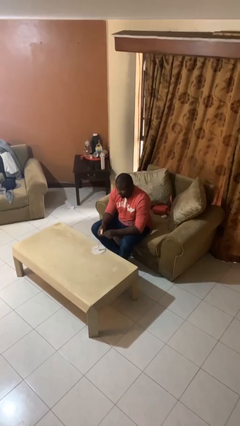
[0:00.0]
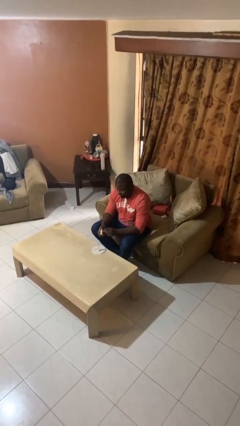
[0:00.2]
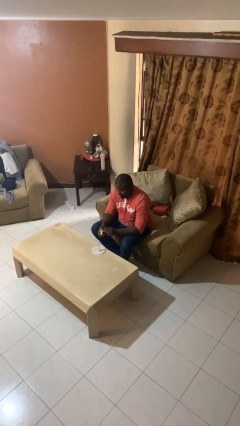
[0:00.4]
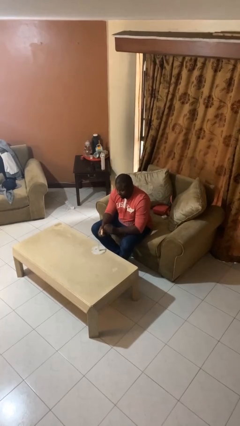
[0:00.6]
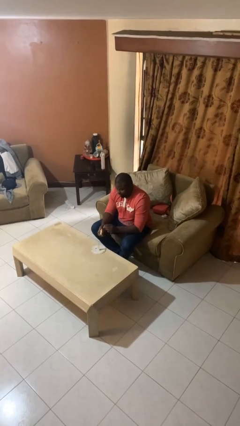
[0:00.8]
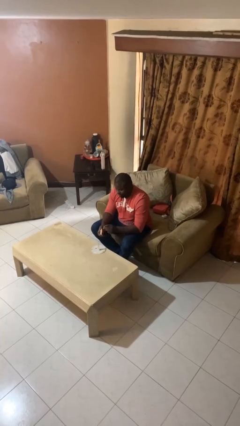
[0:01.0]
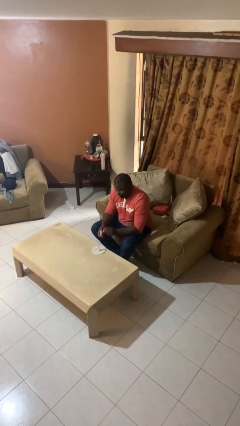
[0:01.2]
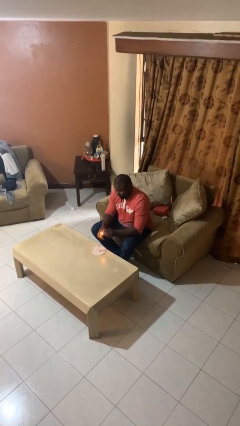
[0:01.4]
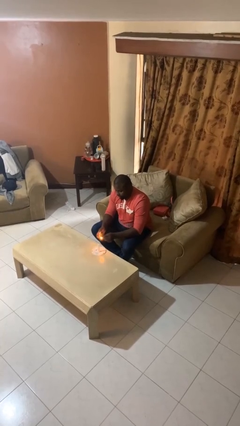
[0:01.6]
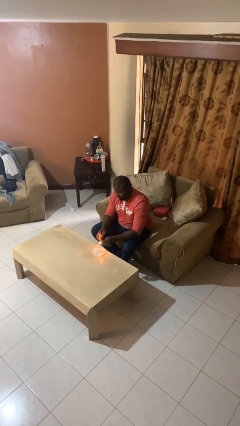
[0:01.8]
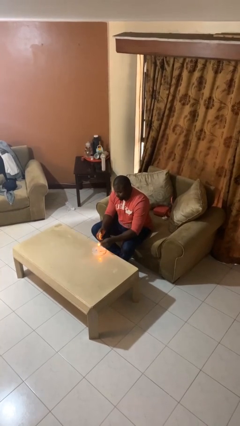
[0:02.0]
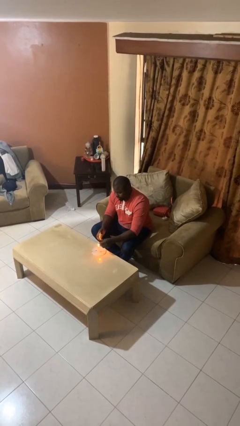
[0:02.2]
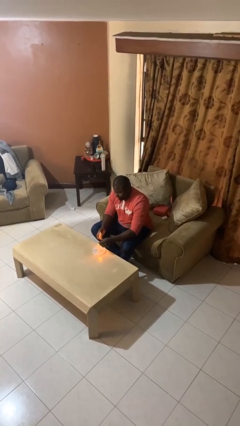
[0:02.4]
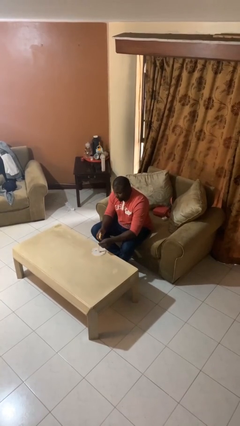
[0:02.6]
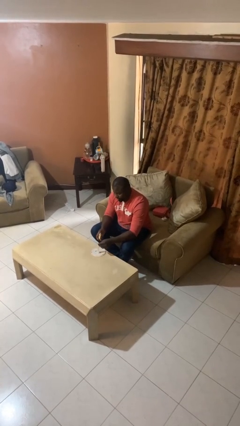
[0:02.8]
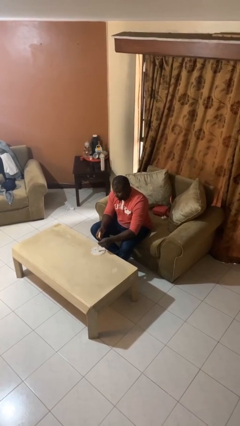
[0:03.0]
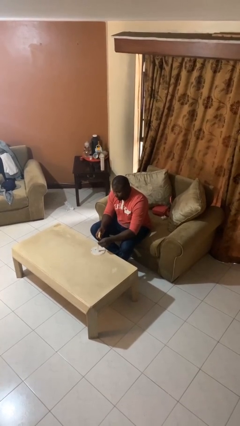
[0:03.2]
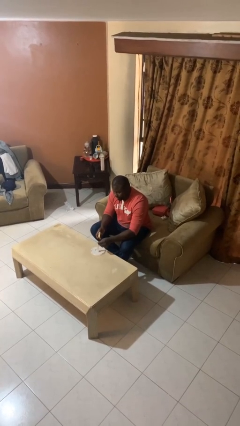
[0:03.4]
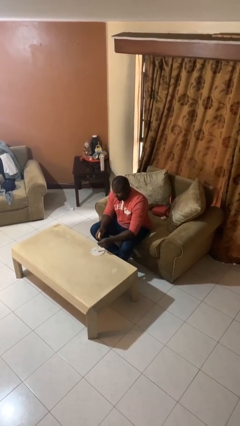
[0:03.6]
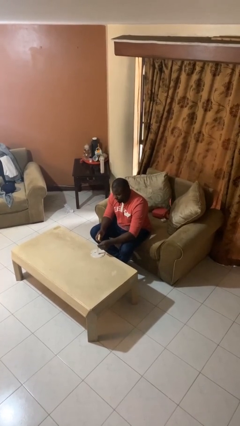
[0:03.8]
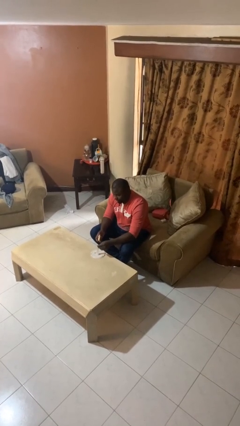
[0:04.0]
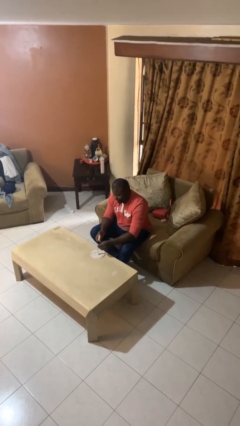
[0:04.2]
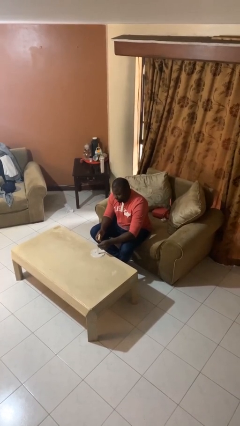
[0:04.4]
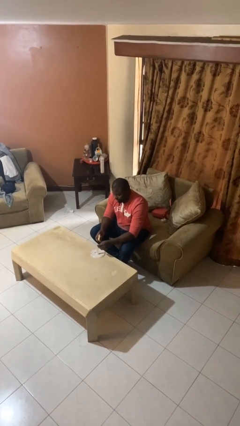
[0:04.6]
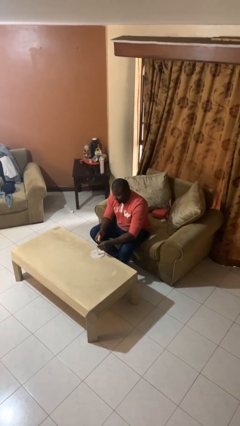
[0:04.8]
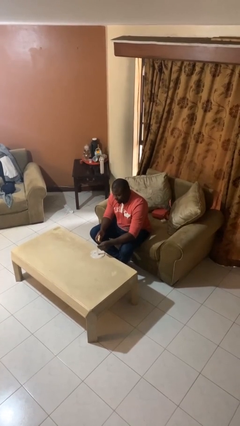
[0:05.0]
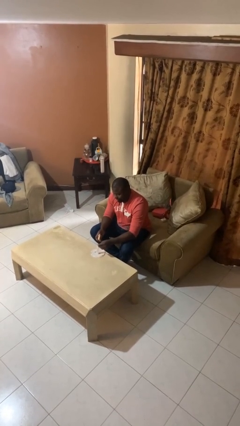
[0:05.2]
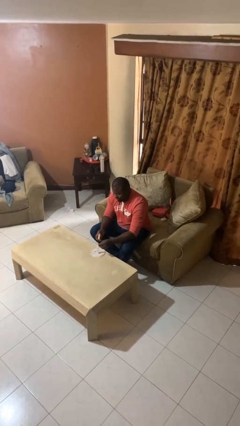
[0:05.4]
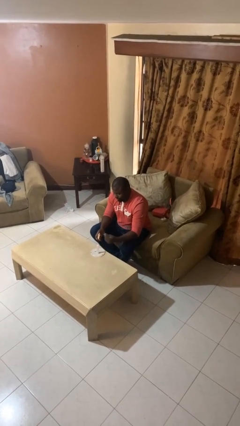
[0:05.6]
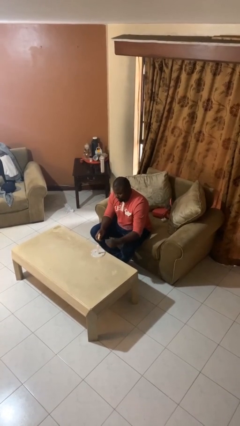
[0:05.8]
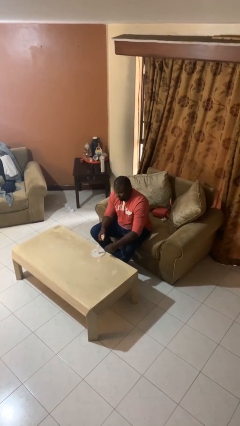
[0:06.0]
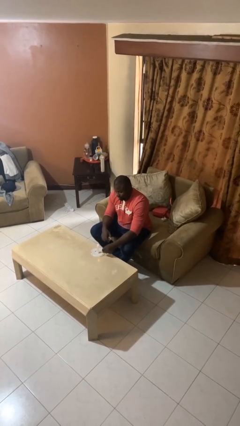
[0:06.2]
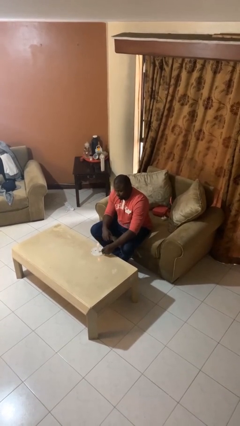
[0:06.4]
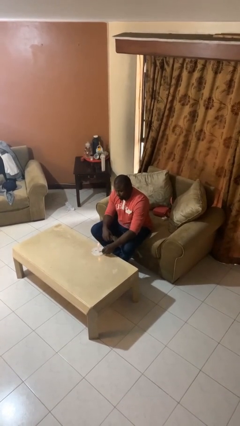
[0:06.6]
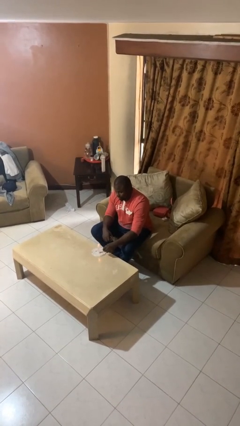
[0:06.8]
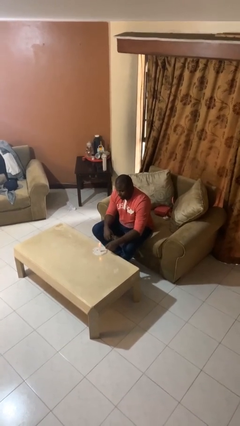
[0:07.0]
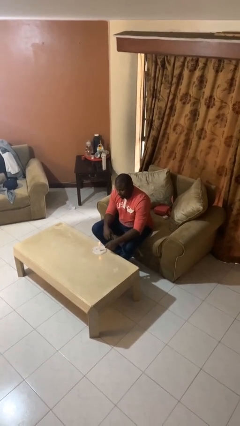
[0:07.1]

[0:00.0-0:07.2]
person lights candle

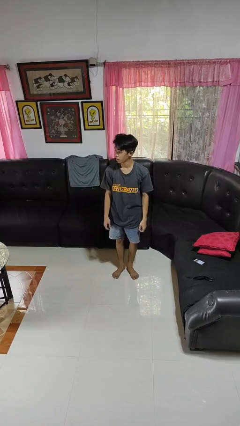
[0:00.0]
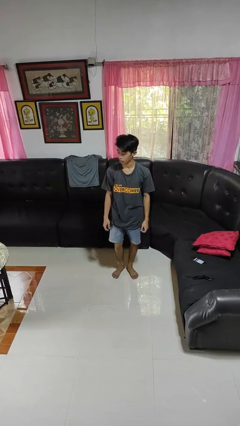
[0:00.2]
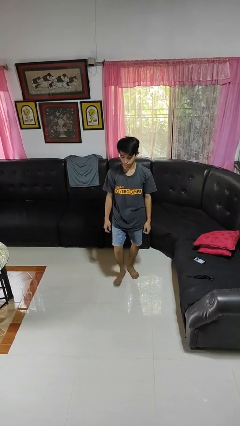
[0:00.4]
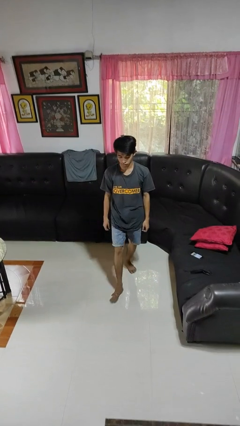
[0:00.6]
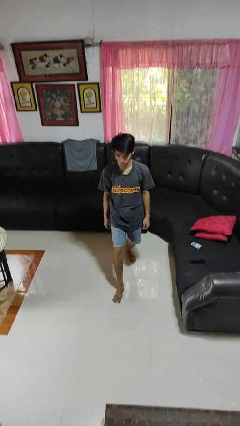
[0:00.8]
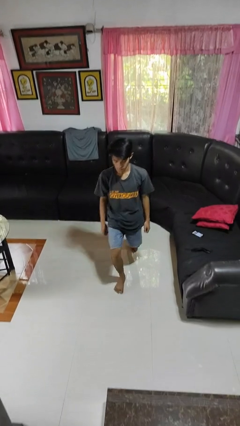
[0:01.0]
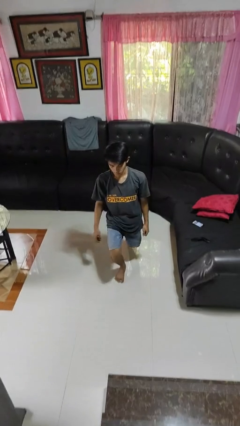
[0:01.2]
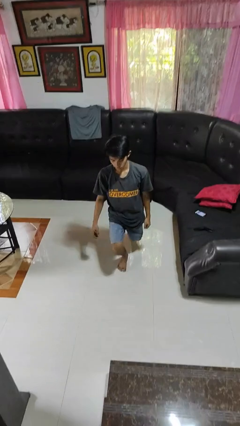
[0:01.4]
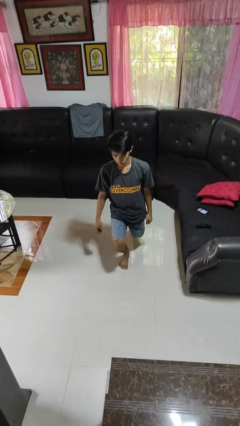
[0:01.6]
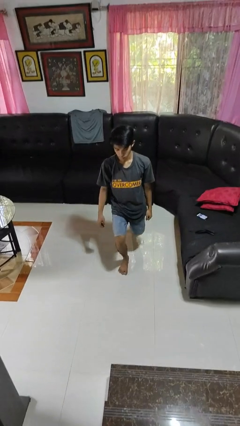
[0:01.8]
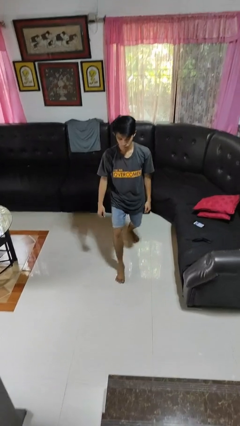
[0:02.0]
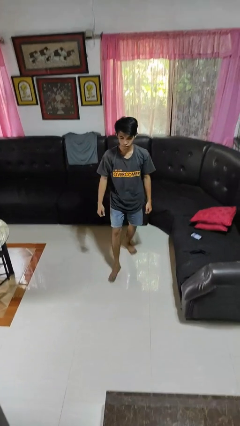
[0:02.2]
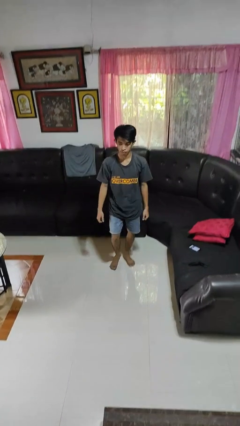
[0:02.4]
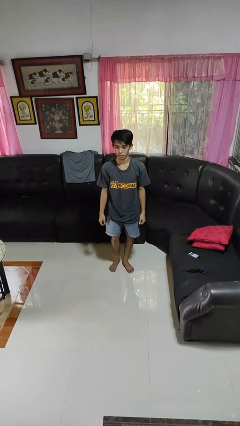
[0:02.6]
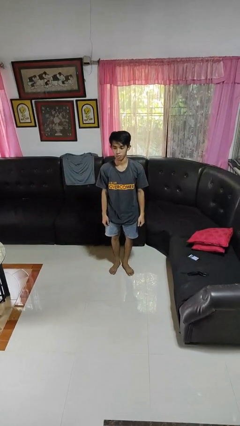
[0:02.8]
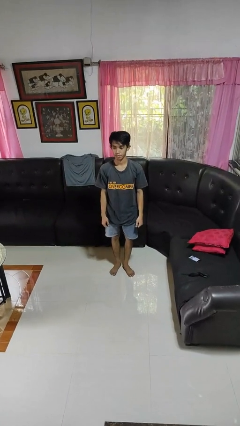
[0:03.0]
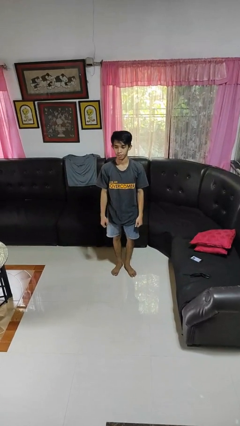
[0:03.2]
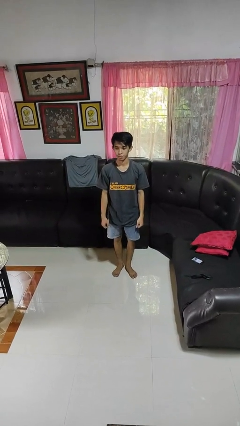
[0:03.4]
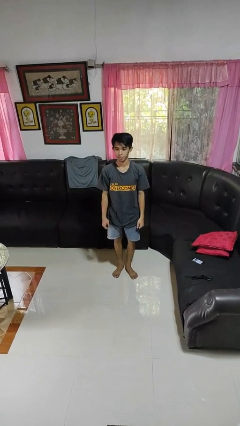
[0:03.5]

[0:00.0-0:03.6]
person exercises with lunges

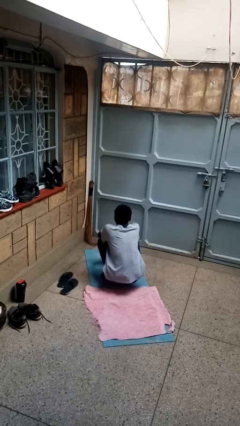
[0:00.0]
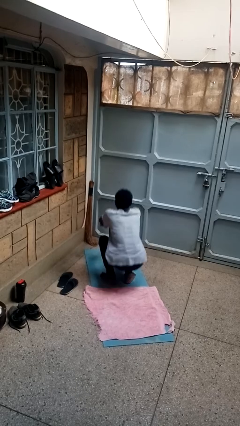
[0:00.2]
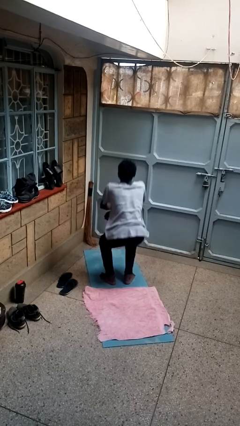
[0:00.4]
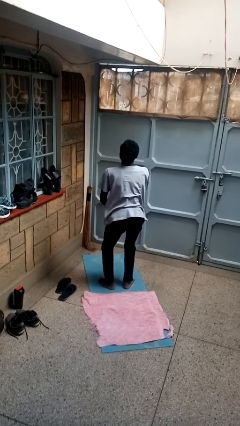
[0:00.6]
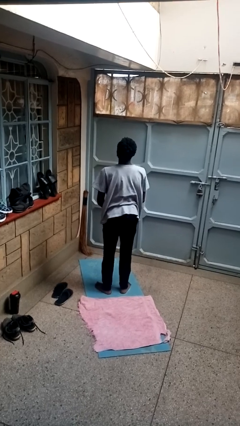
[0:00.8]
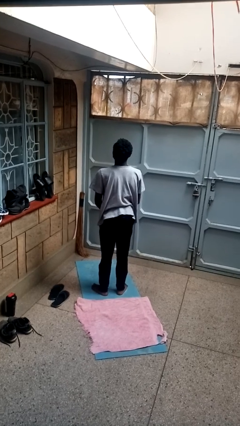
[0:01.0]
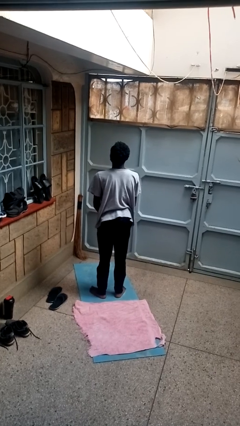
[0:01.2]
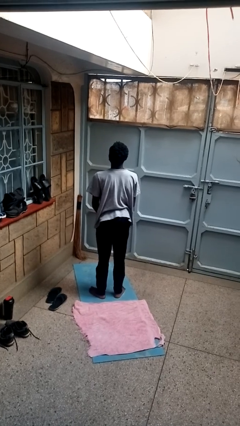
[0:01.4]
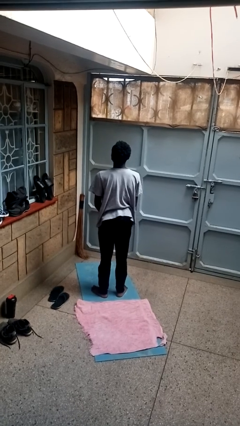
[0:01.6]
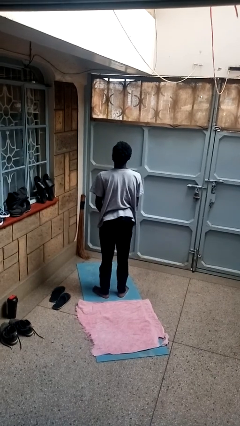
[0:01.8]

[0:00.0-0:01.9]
person stands up

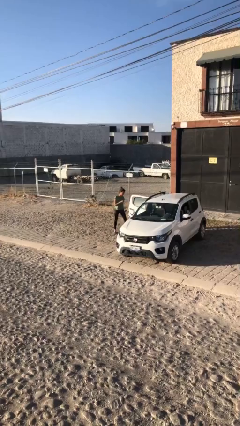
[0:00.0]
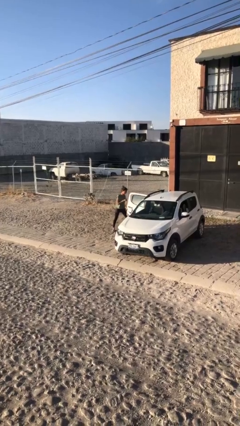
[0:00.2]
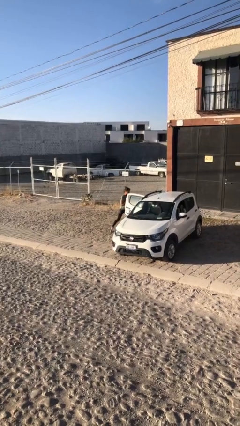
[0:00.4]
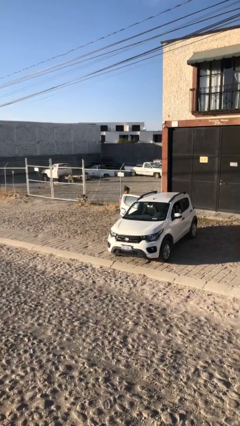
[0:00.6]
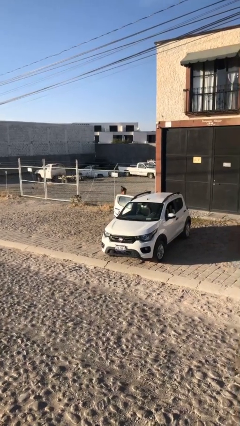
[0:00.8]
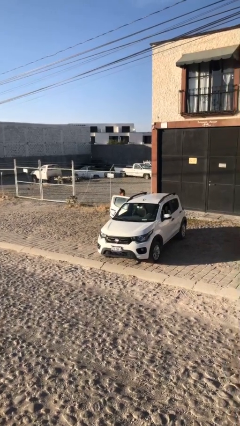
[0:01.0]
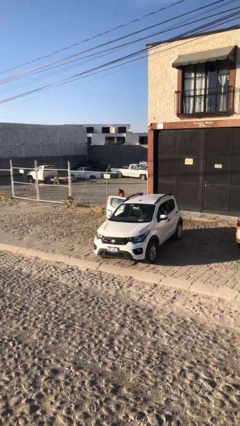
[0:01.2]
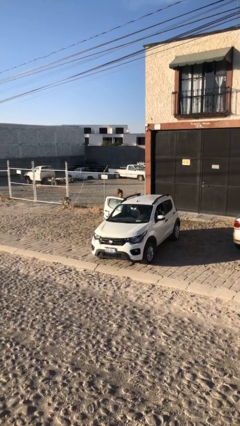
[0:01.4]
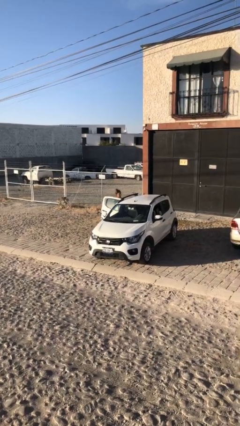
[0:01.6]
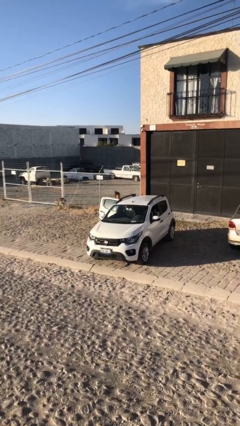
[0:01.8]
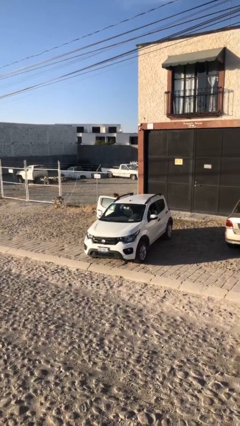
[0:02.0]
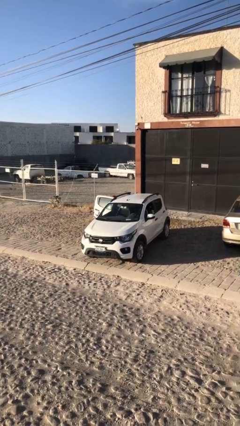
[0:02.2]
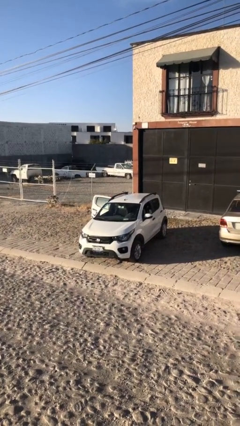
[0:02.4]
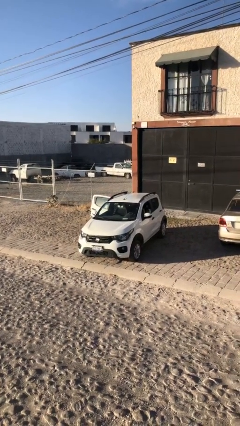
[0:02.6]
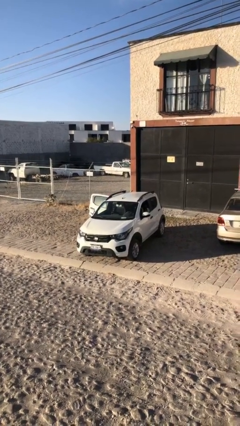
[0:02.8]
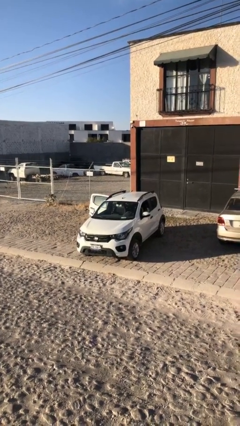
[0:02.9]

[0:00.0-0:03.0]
person enters car

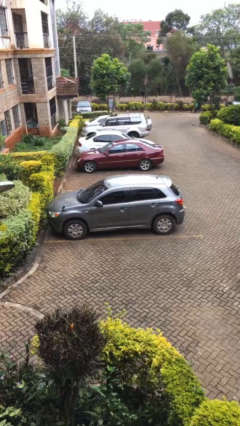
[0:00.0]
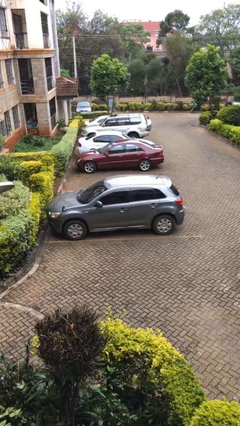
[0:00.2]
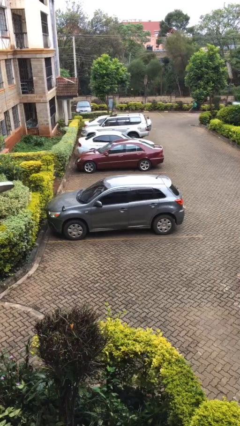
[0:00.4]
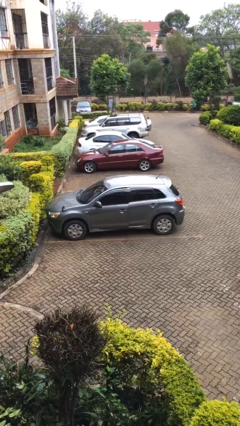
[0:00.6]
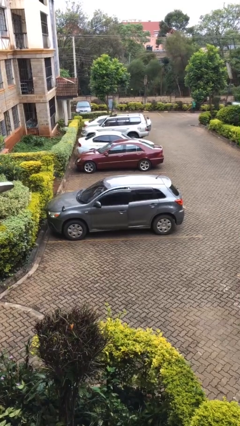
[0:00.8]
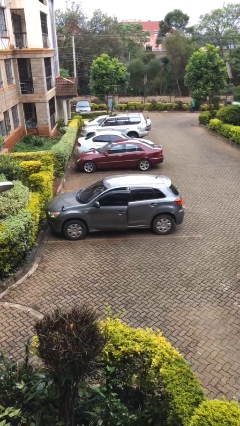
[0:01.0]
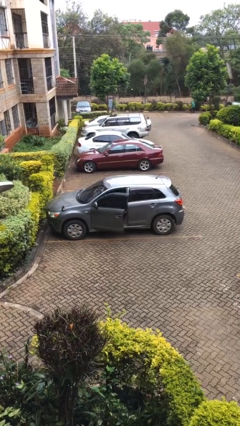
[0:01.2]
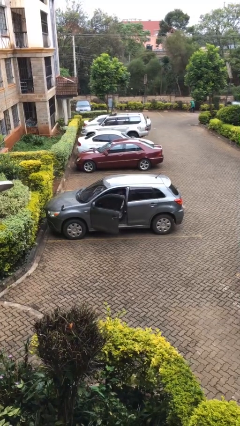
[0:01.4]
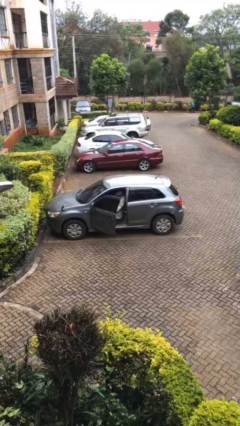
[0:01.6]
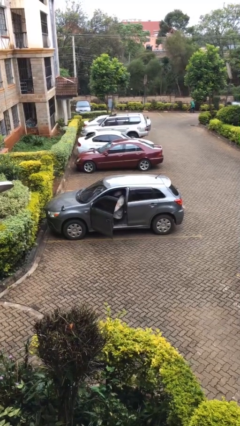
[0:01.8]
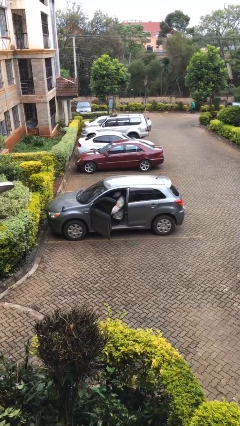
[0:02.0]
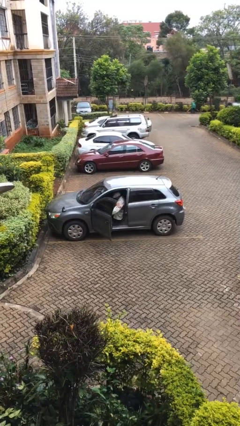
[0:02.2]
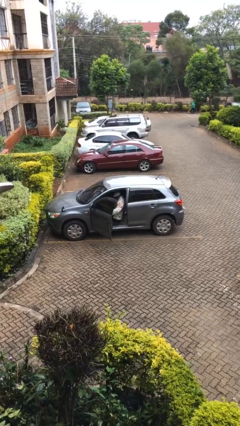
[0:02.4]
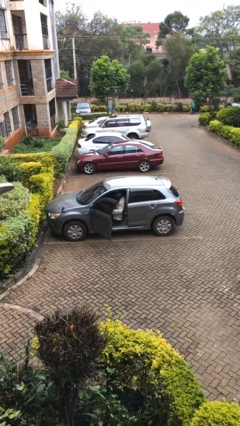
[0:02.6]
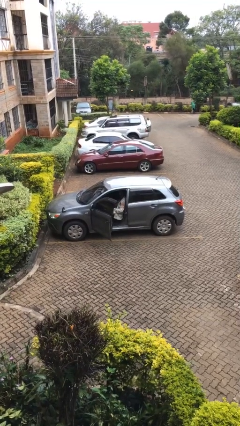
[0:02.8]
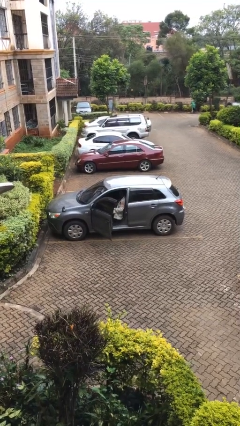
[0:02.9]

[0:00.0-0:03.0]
person opens car door
